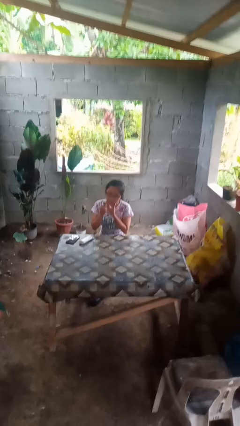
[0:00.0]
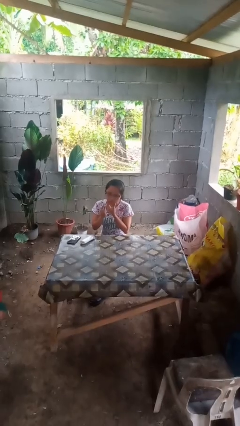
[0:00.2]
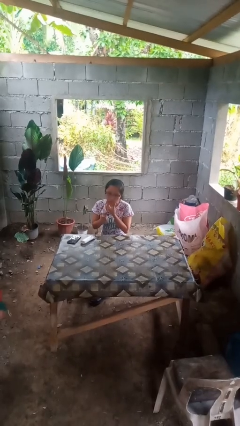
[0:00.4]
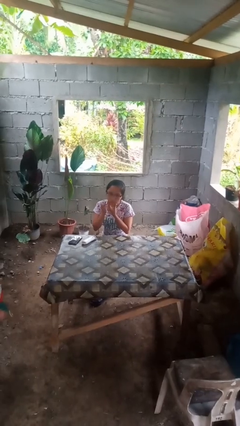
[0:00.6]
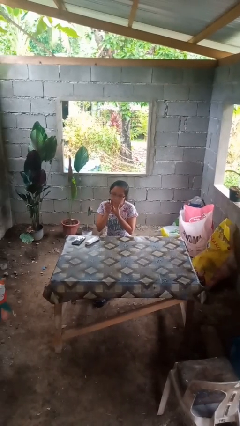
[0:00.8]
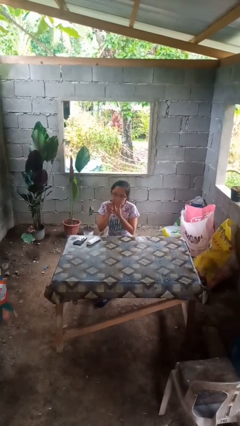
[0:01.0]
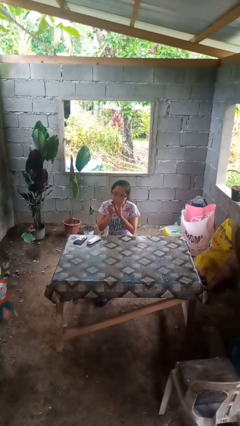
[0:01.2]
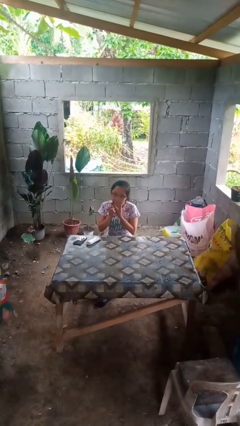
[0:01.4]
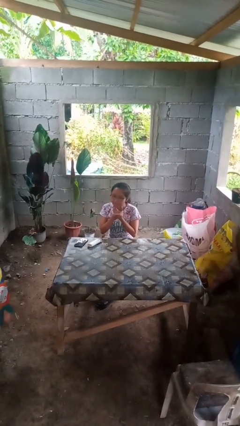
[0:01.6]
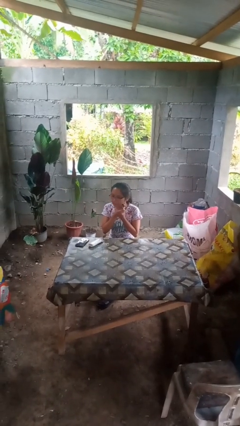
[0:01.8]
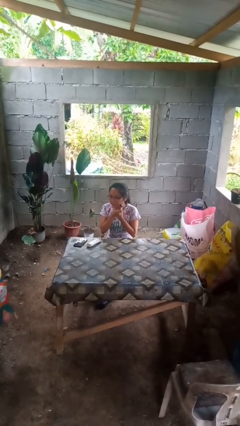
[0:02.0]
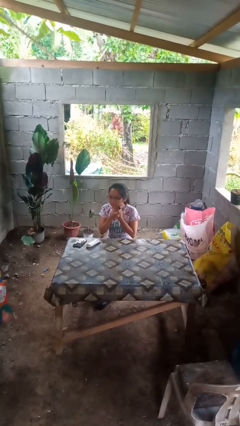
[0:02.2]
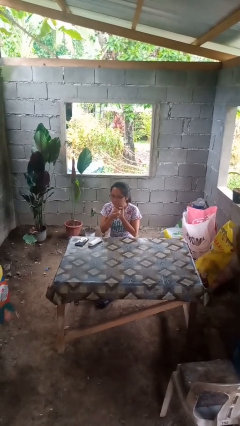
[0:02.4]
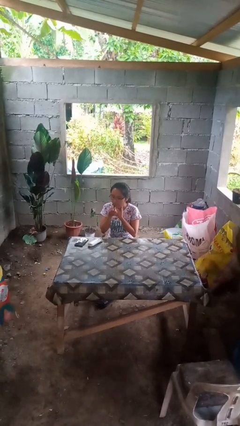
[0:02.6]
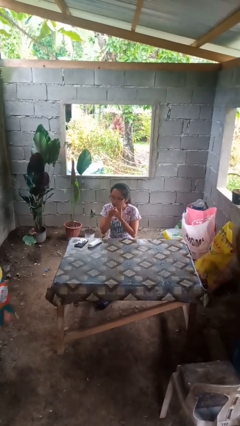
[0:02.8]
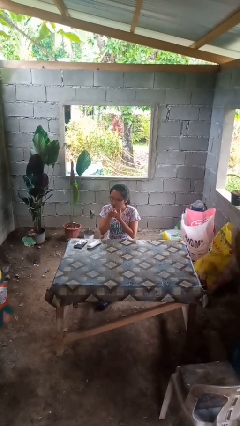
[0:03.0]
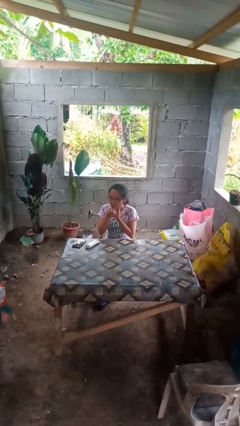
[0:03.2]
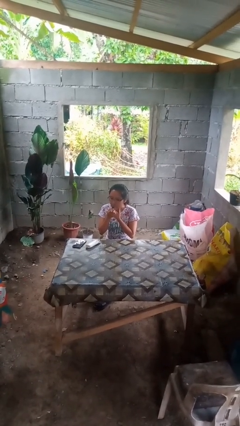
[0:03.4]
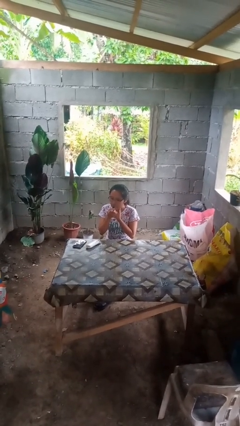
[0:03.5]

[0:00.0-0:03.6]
person shaves face

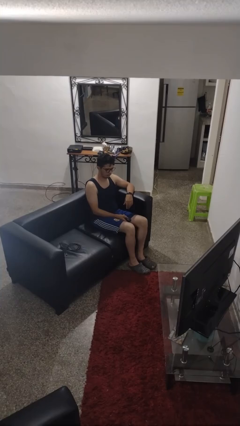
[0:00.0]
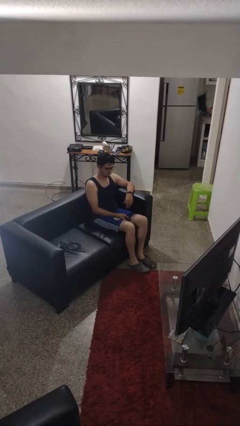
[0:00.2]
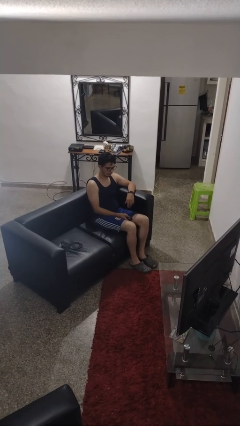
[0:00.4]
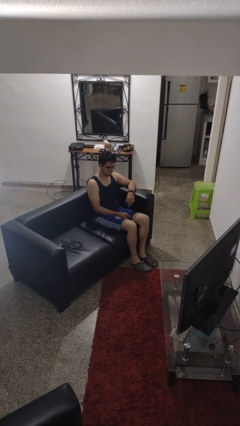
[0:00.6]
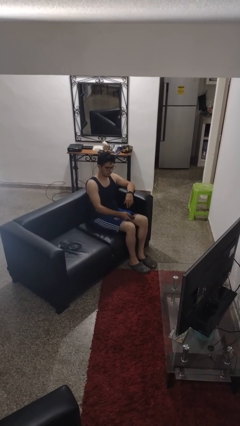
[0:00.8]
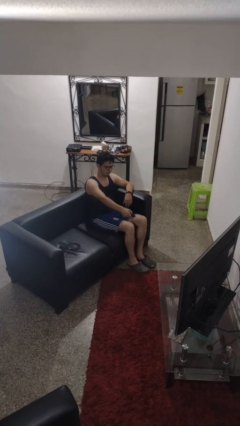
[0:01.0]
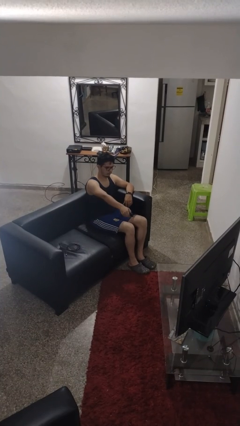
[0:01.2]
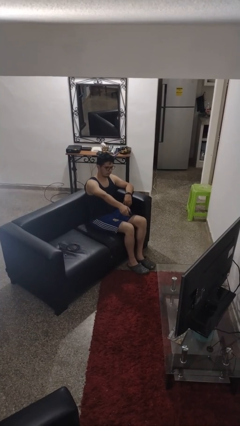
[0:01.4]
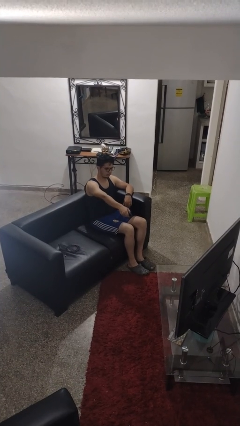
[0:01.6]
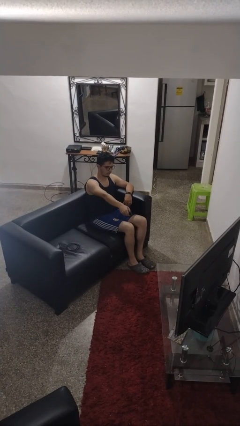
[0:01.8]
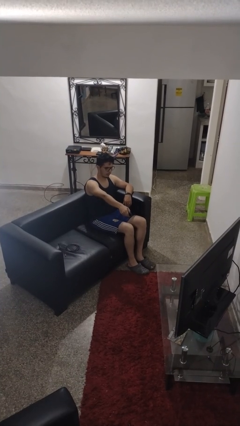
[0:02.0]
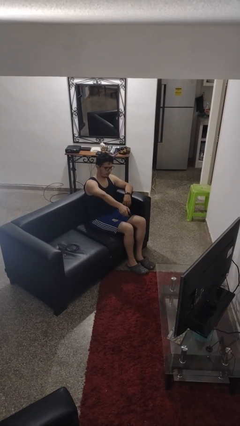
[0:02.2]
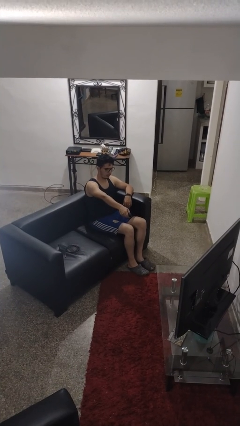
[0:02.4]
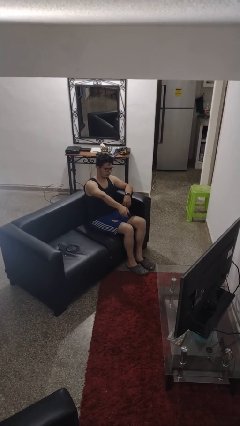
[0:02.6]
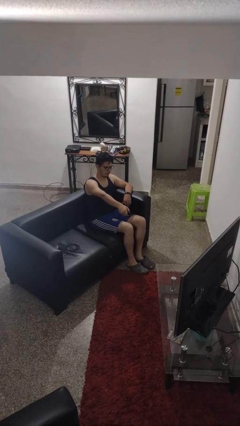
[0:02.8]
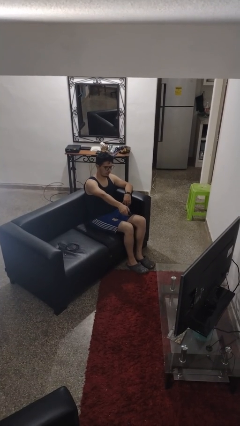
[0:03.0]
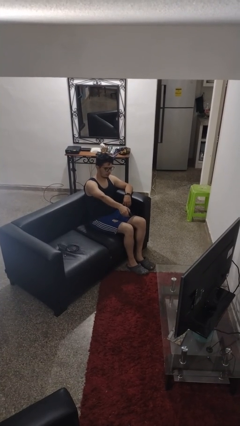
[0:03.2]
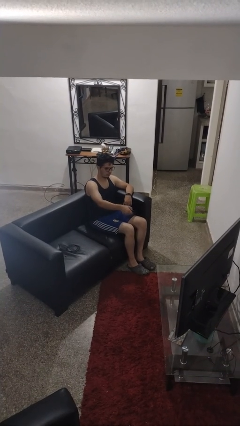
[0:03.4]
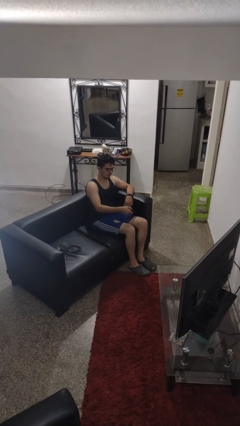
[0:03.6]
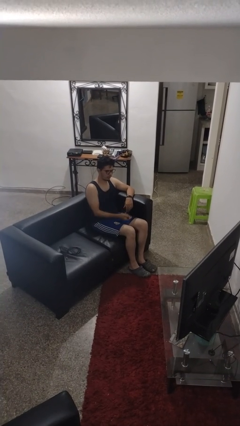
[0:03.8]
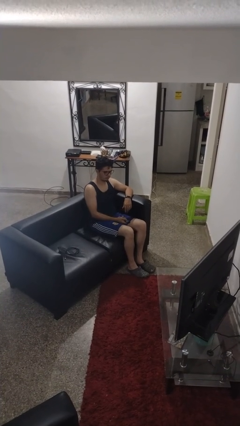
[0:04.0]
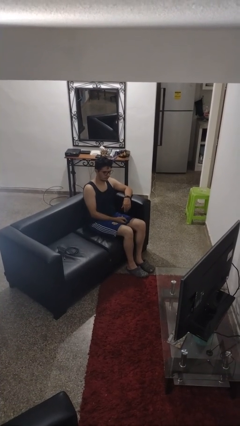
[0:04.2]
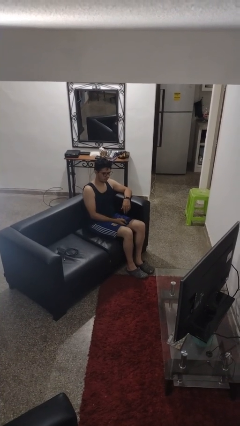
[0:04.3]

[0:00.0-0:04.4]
person uses television remote

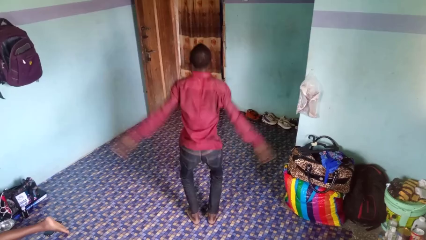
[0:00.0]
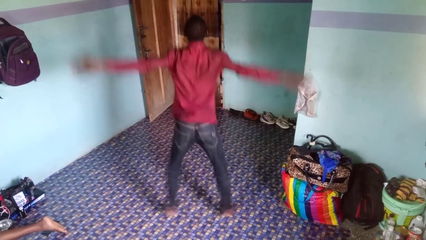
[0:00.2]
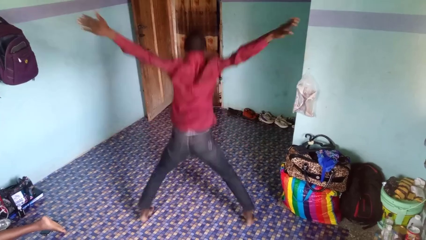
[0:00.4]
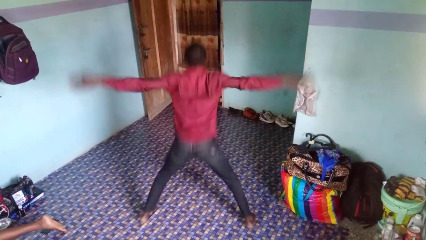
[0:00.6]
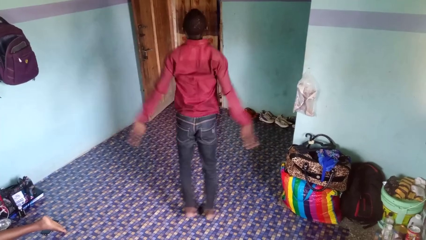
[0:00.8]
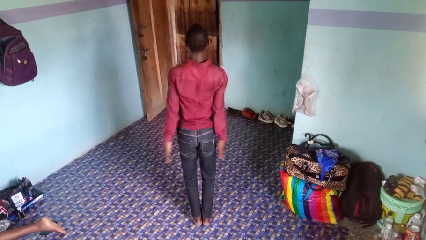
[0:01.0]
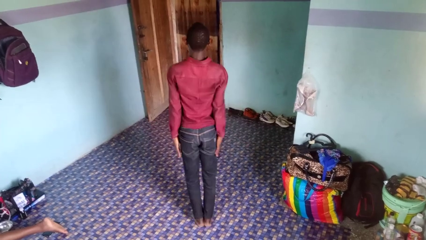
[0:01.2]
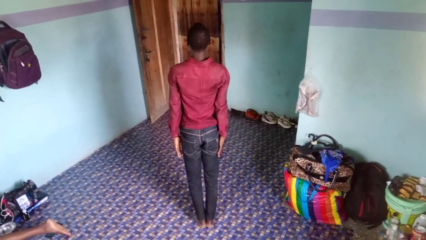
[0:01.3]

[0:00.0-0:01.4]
person exercises with jumping jacks

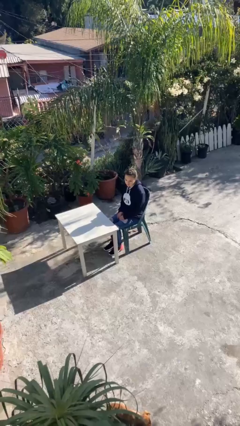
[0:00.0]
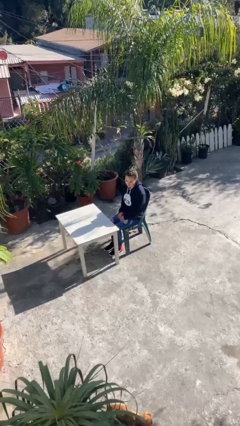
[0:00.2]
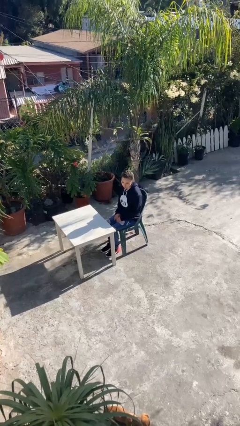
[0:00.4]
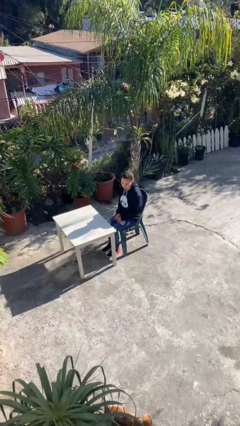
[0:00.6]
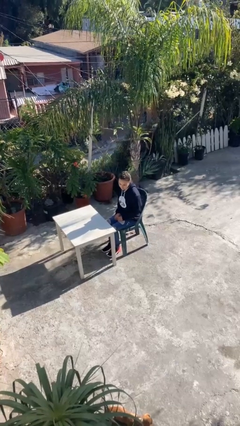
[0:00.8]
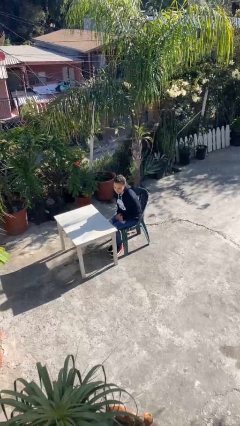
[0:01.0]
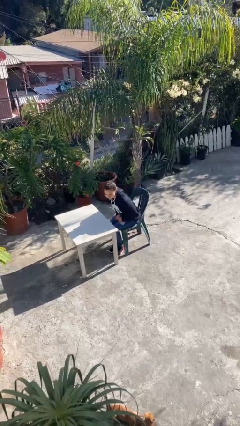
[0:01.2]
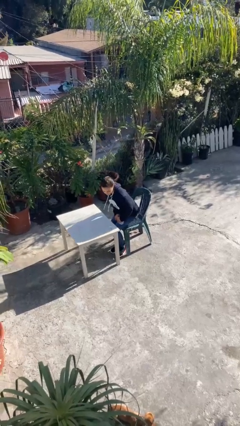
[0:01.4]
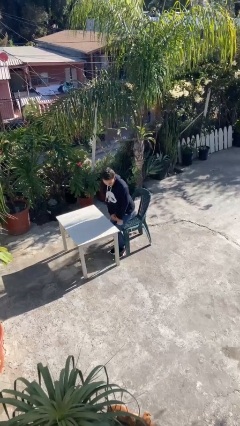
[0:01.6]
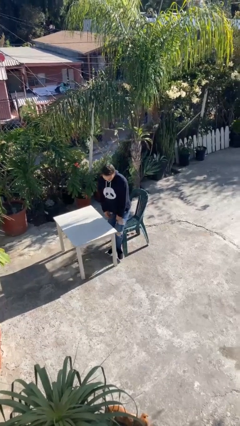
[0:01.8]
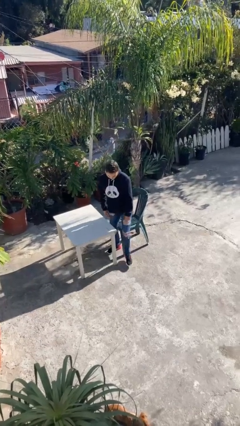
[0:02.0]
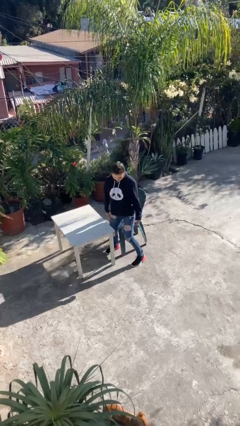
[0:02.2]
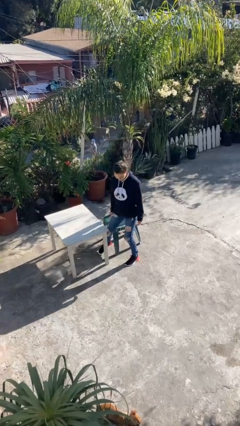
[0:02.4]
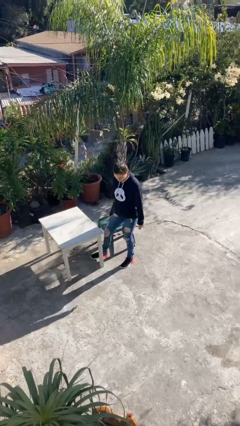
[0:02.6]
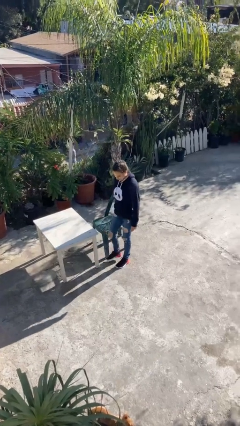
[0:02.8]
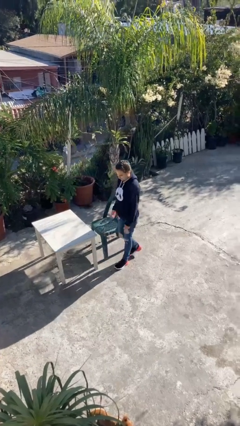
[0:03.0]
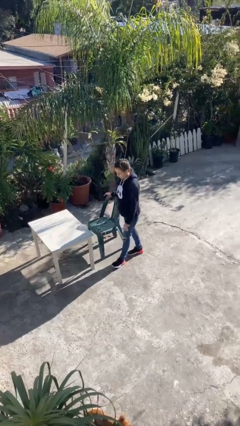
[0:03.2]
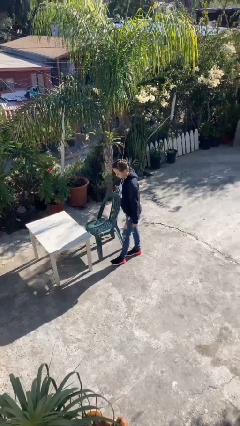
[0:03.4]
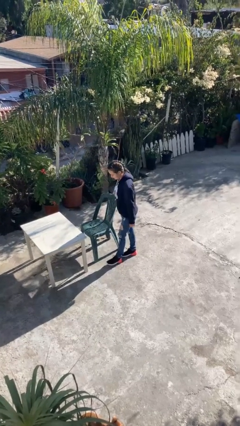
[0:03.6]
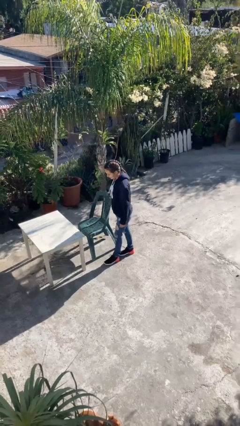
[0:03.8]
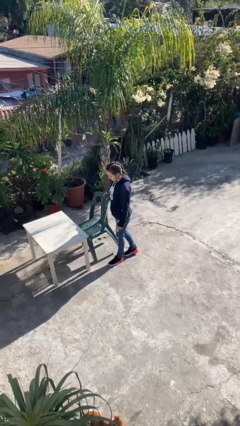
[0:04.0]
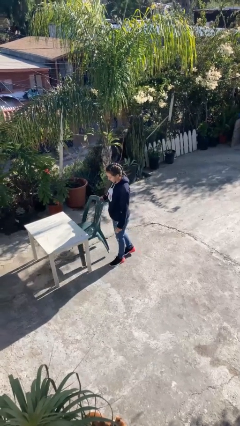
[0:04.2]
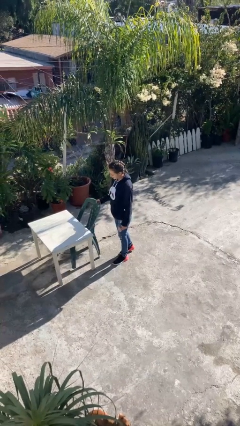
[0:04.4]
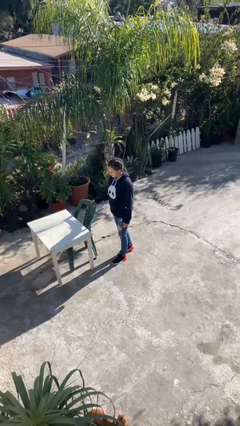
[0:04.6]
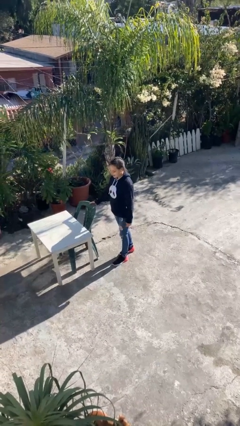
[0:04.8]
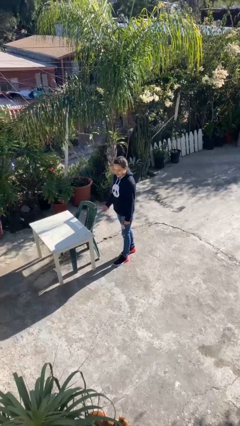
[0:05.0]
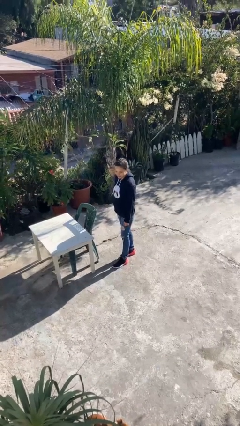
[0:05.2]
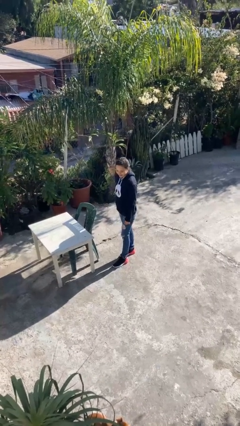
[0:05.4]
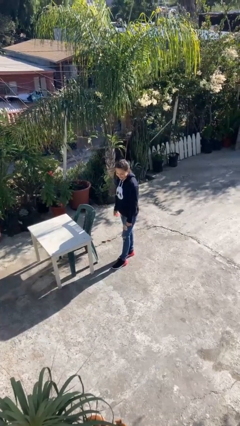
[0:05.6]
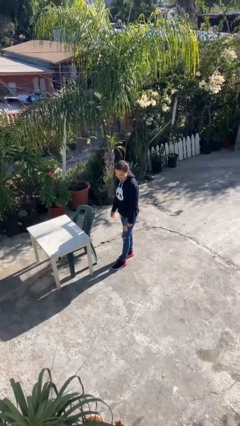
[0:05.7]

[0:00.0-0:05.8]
person stands up

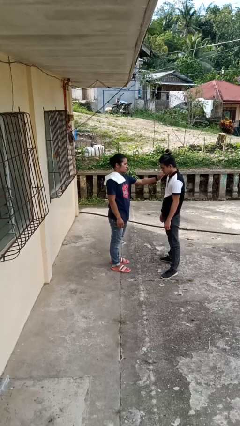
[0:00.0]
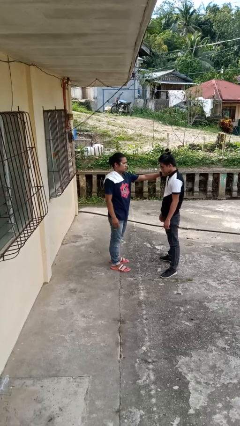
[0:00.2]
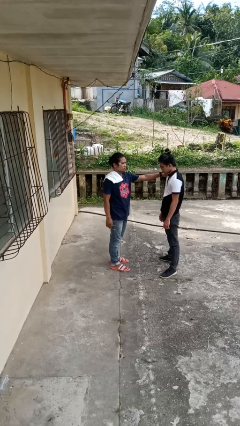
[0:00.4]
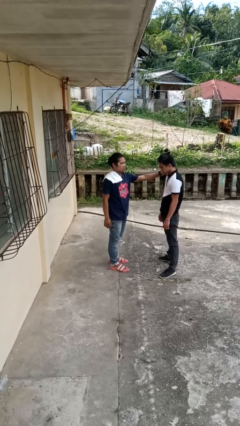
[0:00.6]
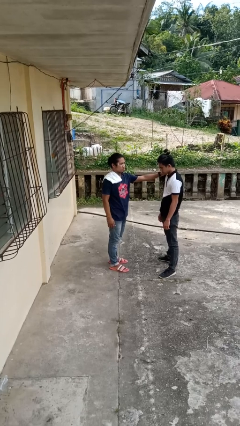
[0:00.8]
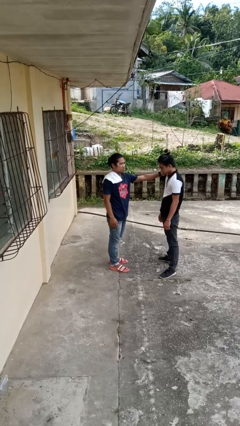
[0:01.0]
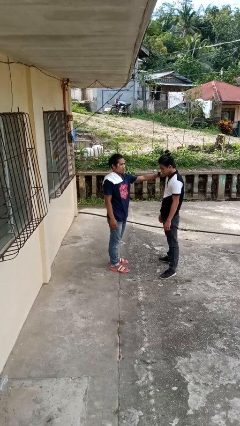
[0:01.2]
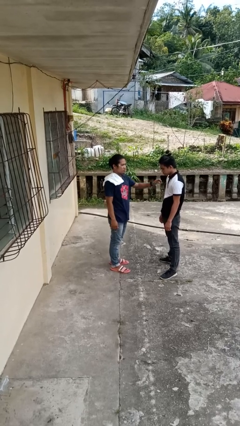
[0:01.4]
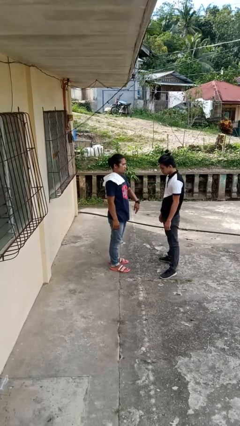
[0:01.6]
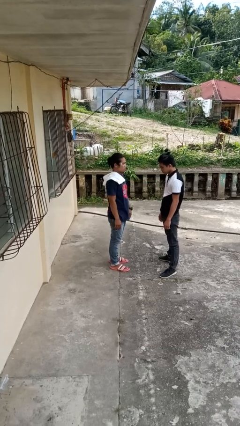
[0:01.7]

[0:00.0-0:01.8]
person pounds shoulders of person

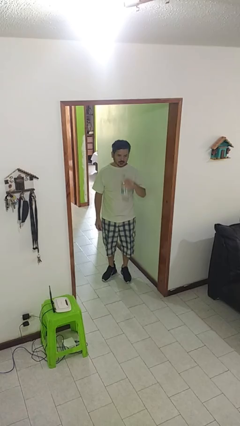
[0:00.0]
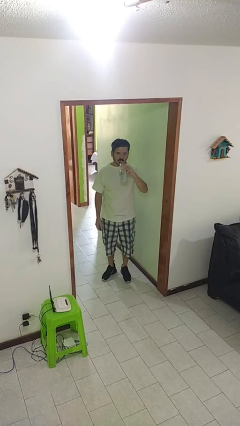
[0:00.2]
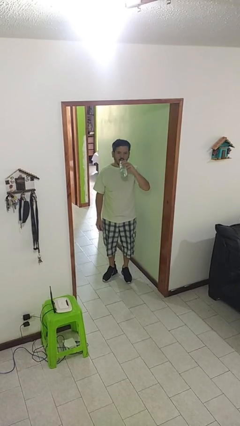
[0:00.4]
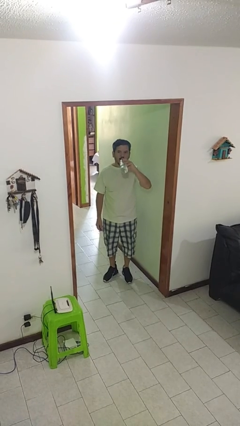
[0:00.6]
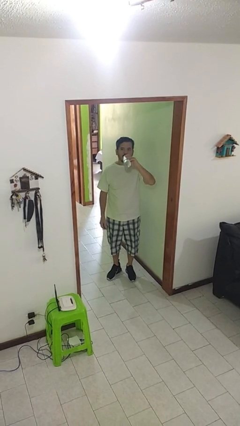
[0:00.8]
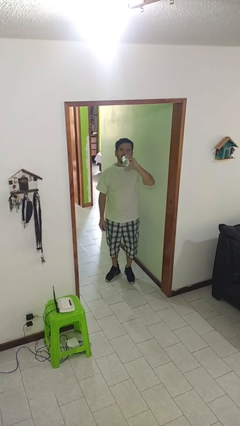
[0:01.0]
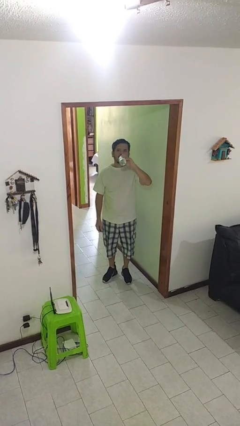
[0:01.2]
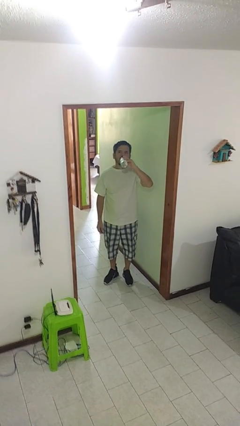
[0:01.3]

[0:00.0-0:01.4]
person drinks from bottle
